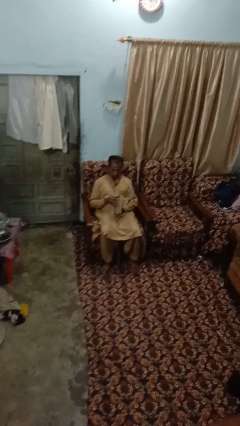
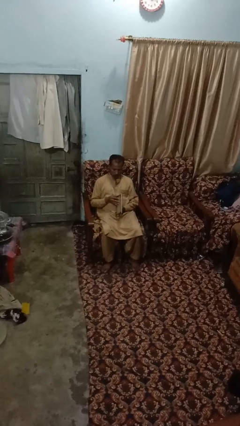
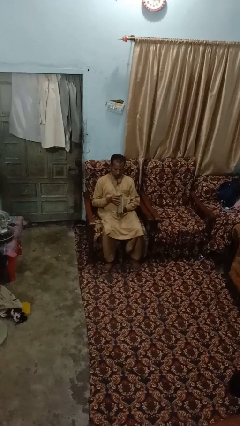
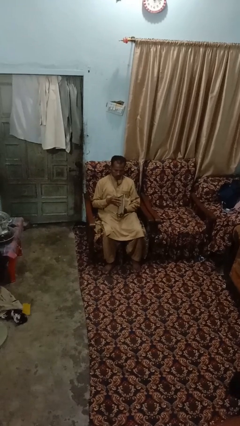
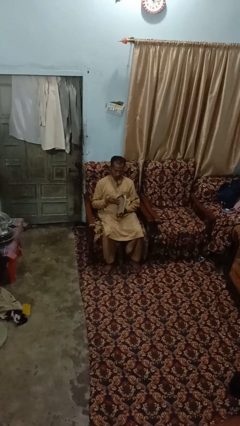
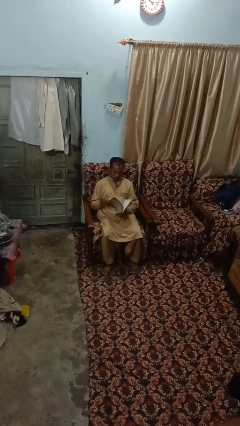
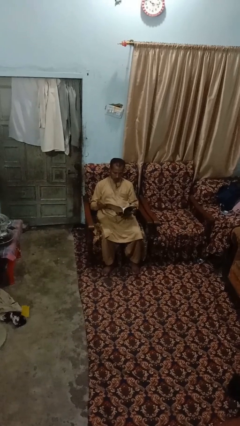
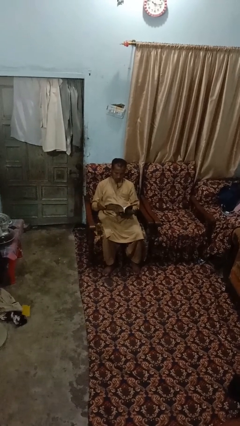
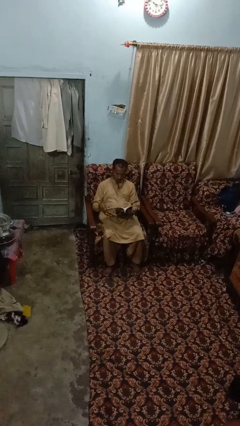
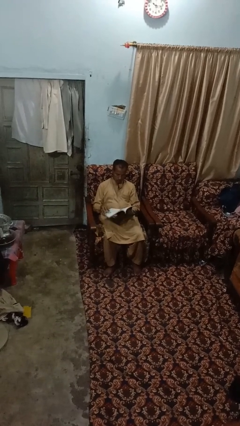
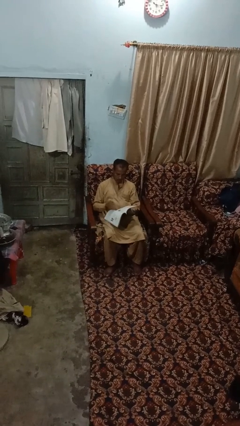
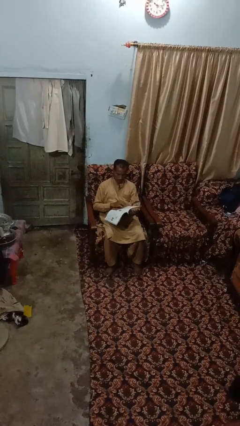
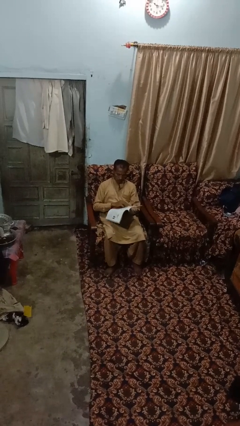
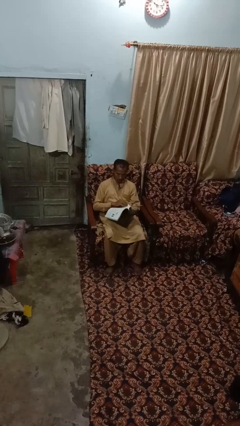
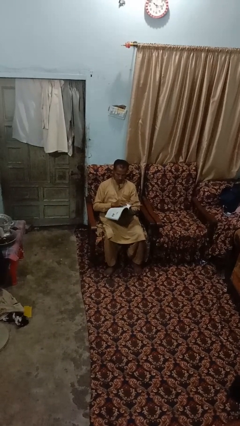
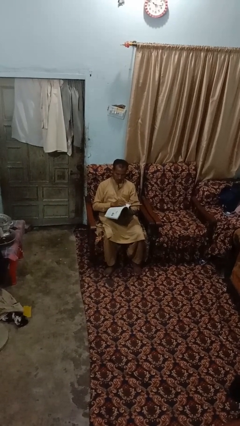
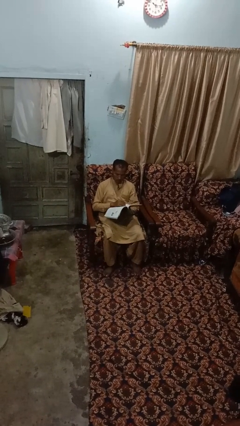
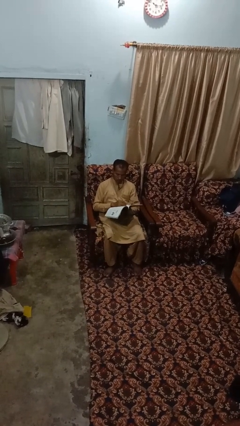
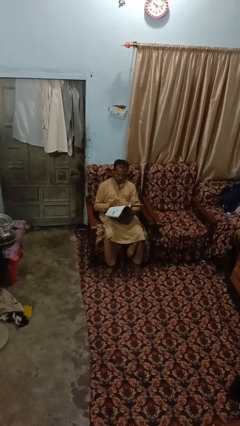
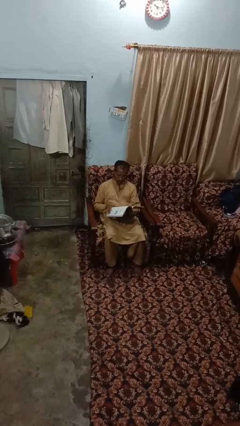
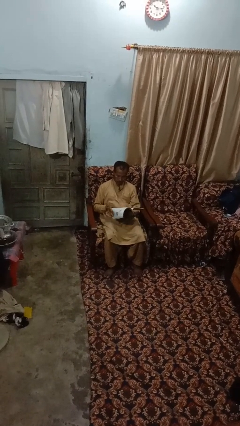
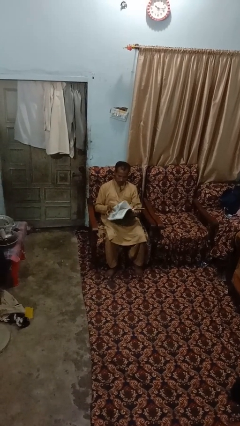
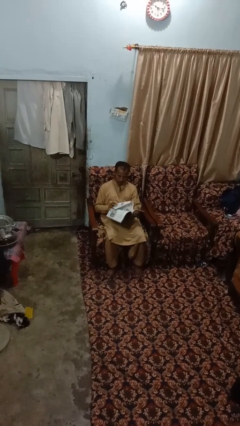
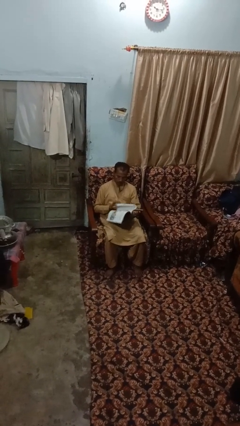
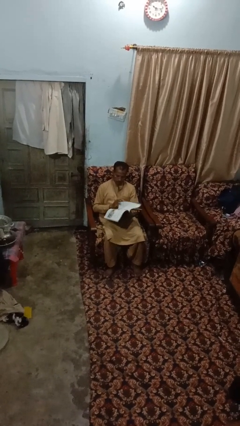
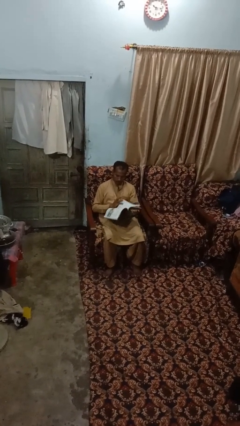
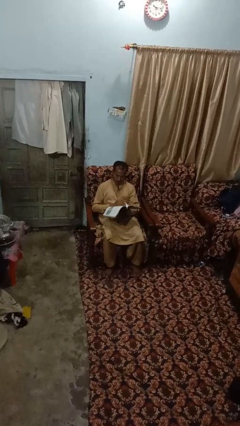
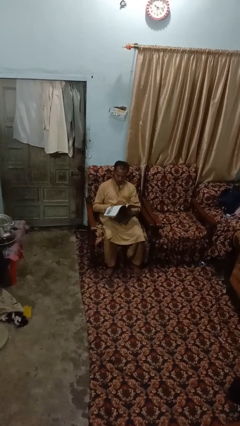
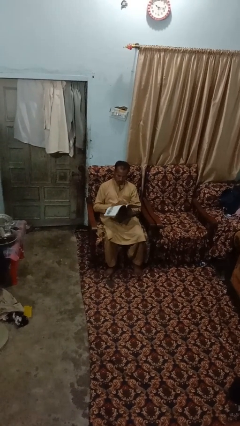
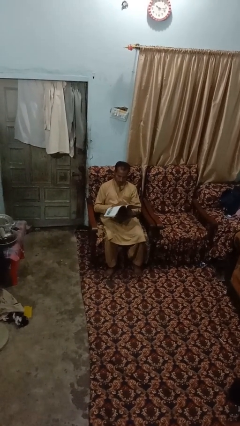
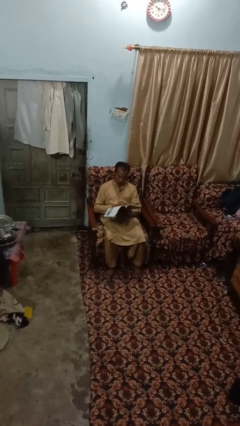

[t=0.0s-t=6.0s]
person reads book

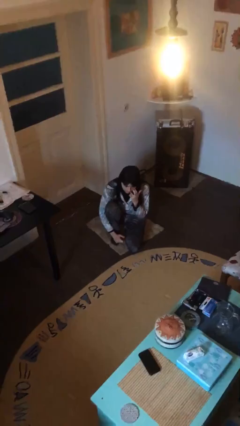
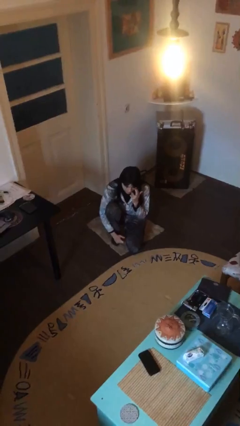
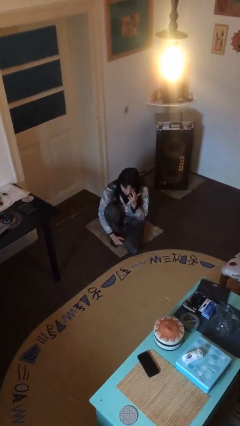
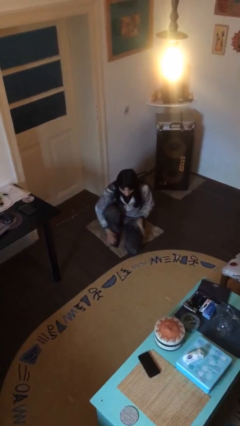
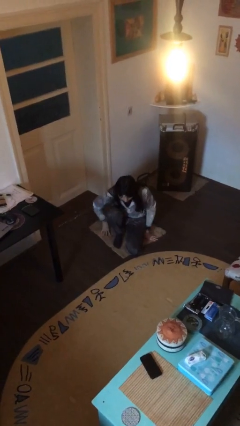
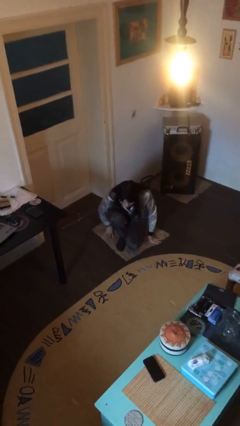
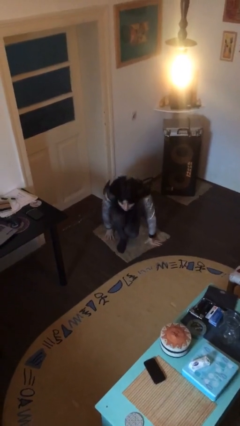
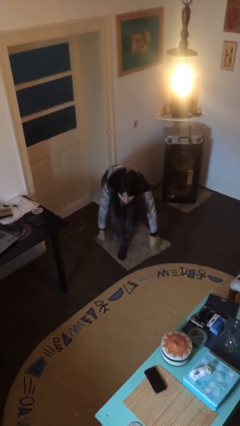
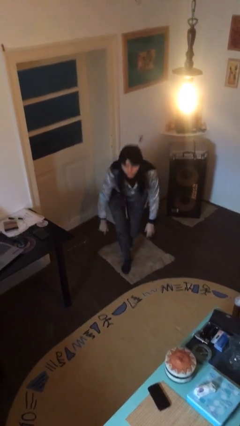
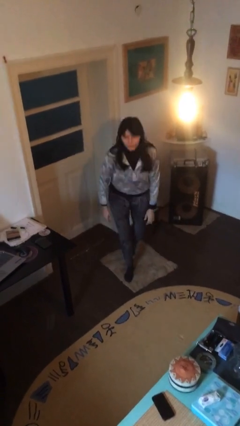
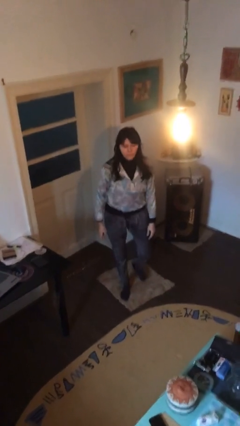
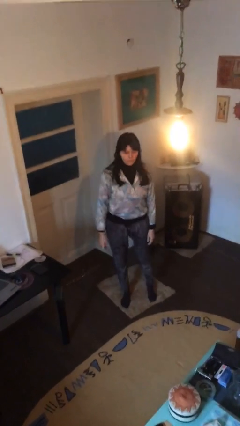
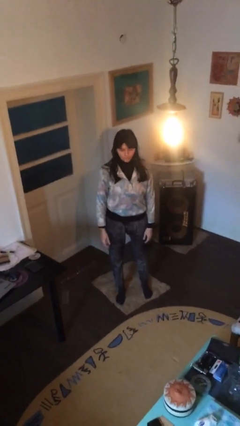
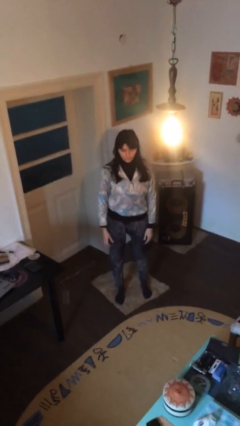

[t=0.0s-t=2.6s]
person stands up

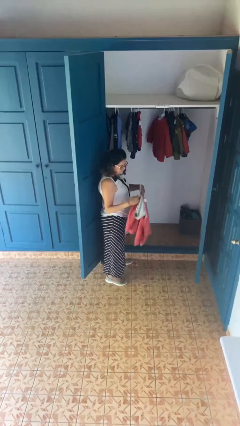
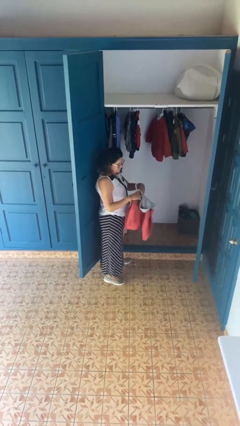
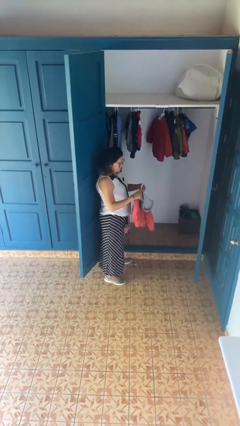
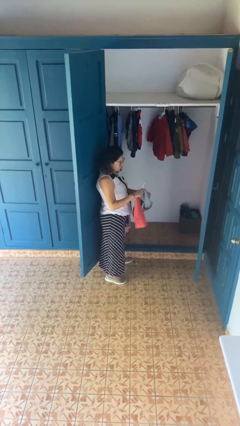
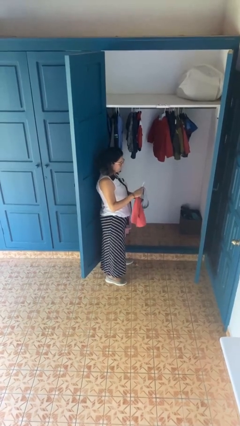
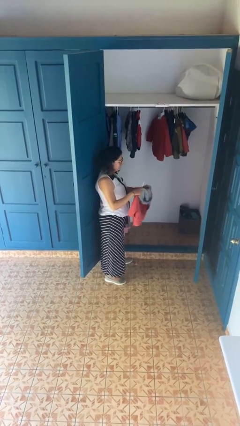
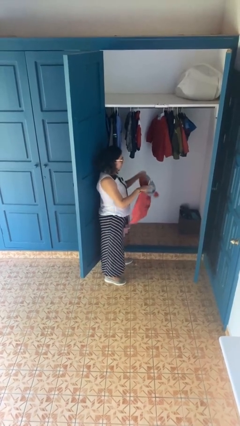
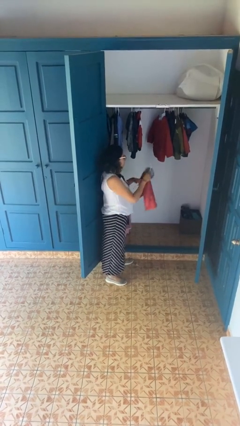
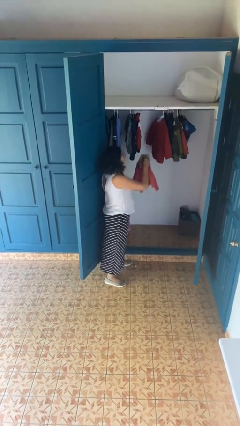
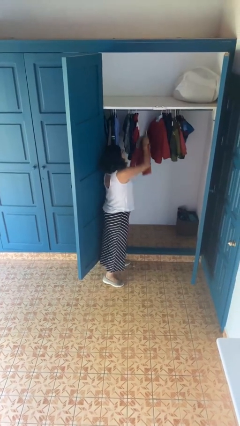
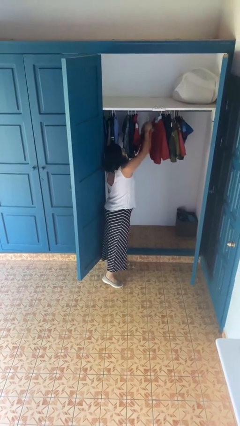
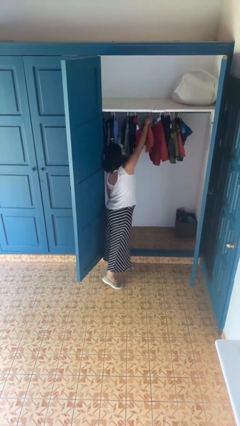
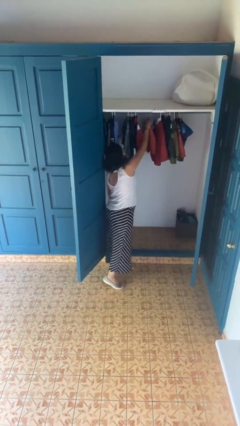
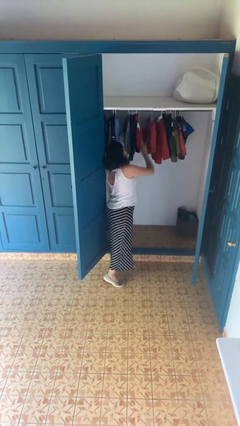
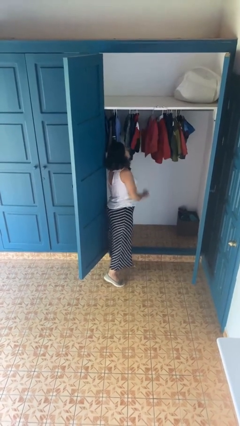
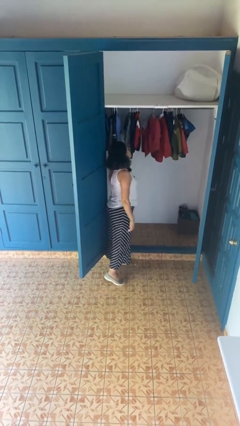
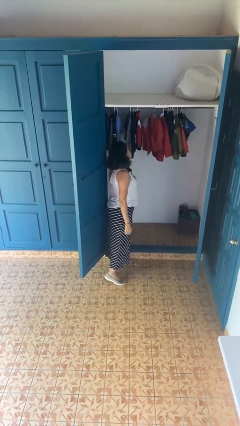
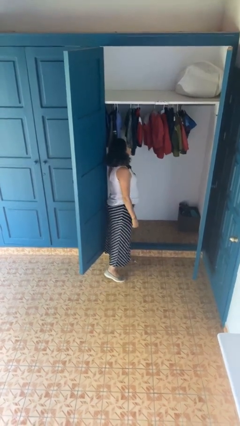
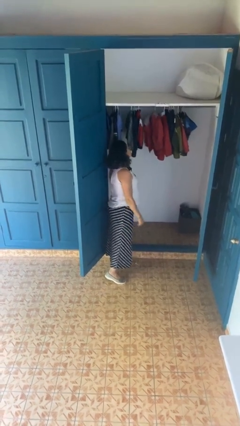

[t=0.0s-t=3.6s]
person puts clothes into closet

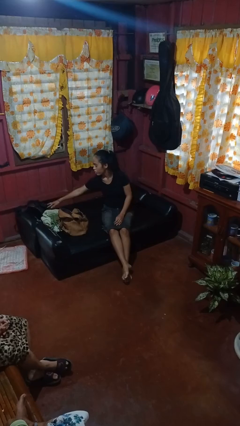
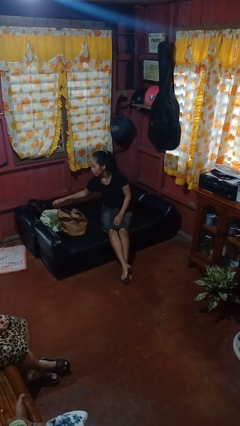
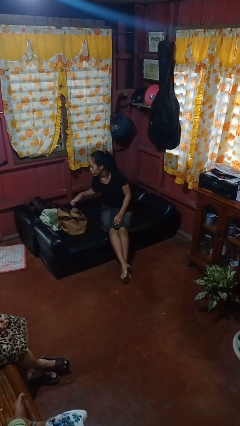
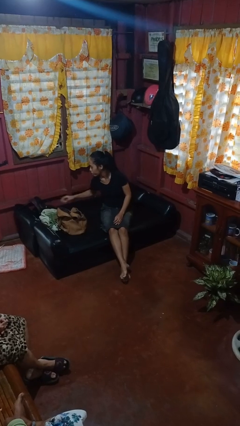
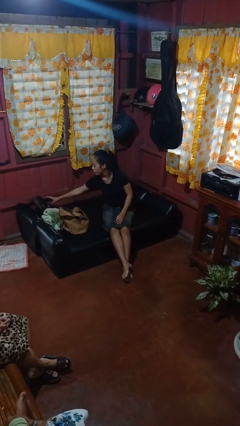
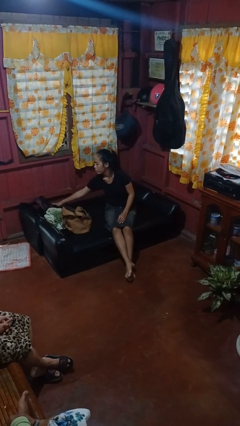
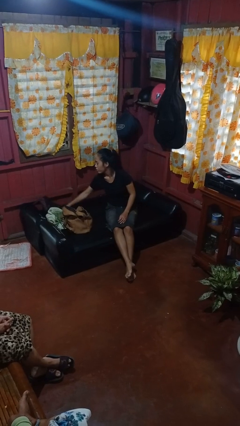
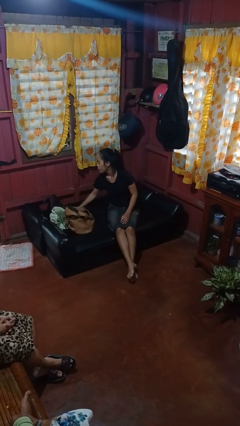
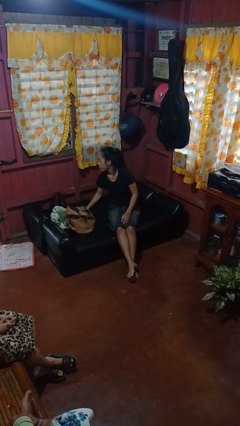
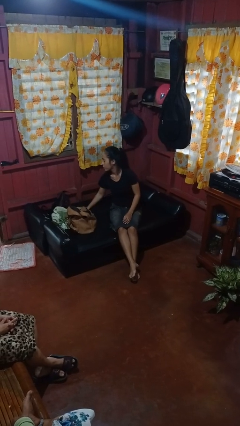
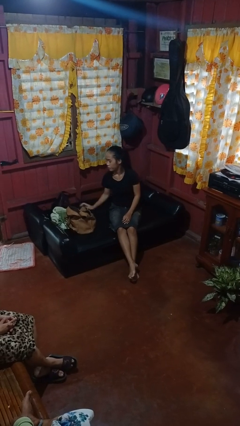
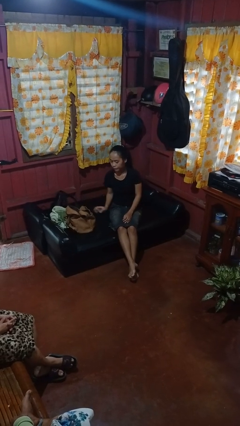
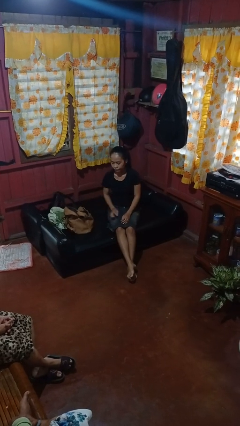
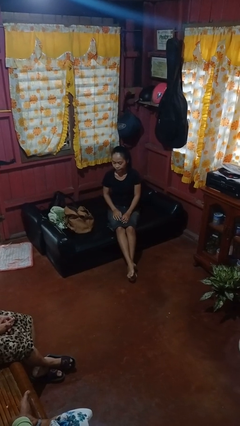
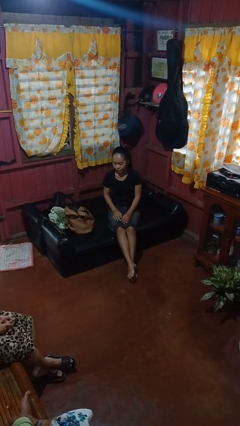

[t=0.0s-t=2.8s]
person searches in couch

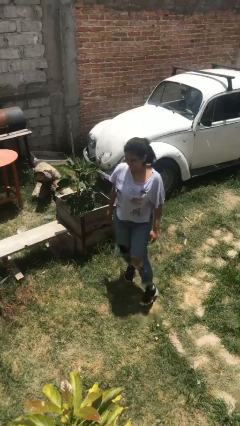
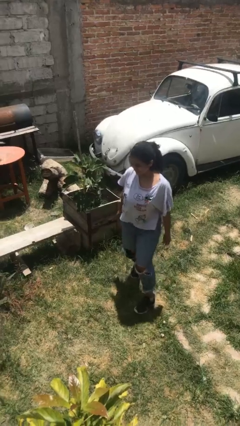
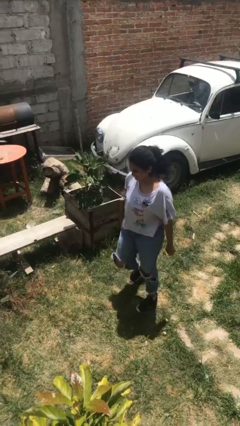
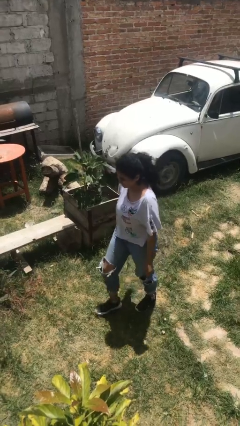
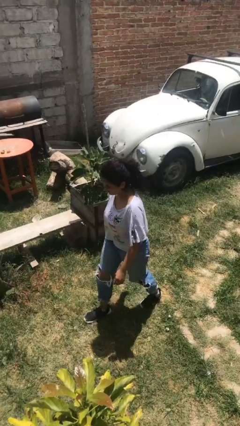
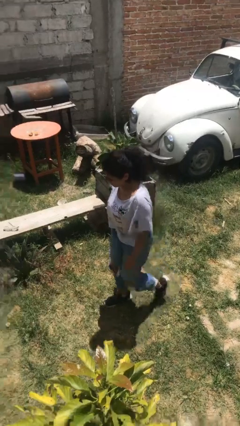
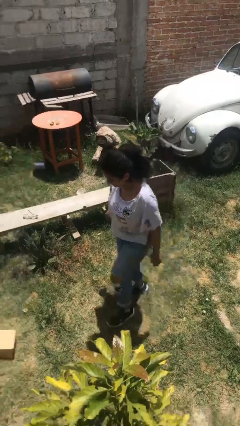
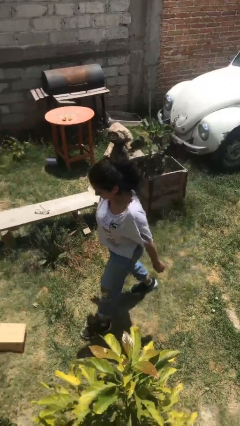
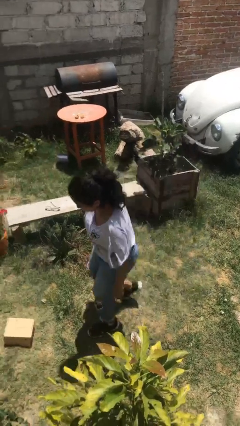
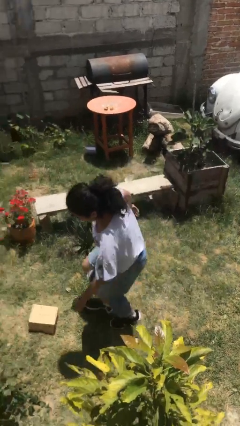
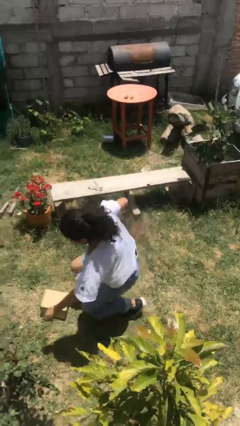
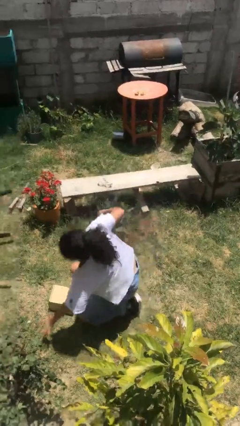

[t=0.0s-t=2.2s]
person trips on object on floor
